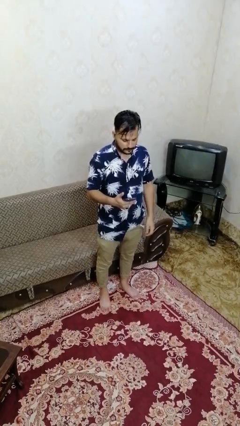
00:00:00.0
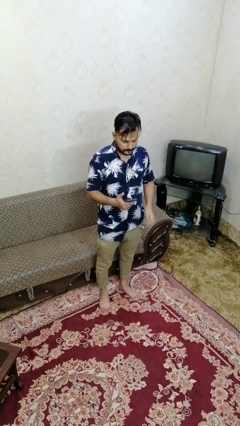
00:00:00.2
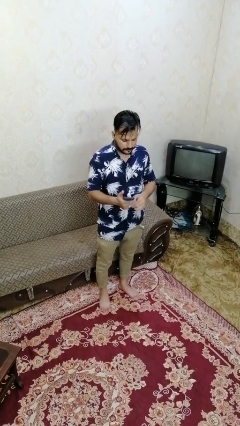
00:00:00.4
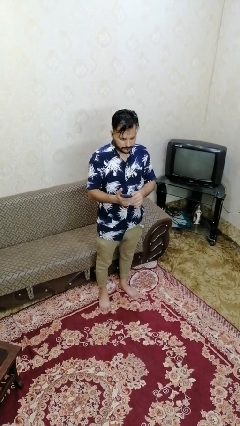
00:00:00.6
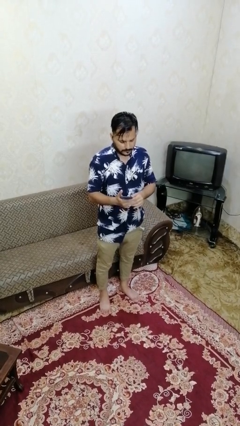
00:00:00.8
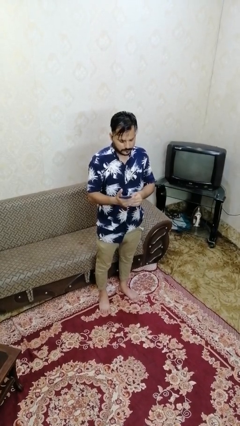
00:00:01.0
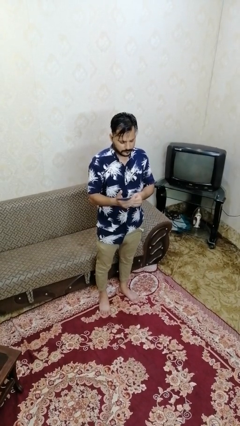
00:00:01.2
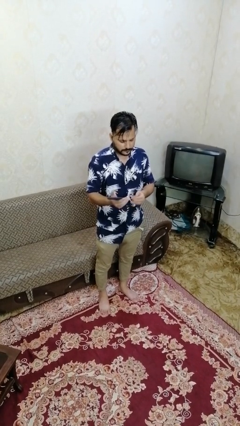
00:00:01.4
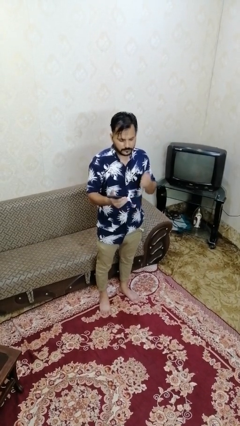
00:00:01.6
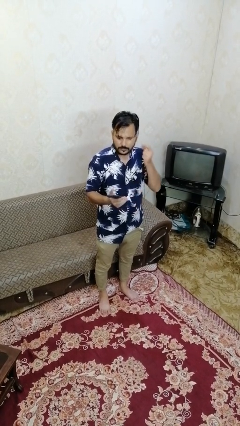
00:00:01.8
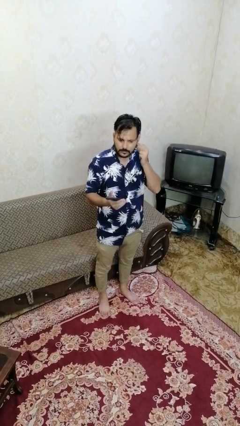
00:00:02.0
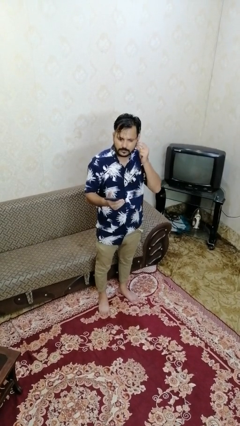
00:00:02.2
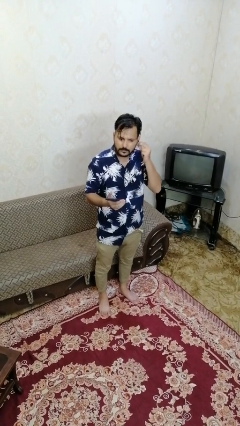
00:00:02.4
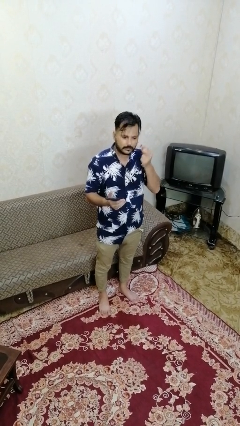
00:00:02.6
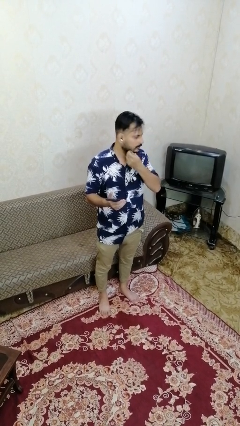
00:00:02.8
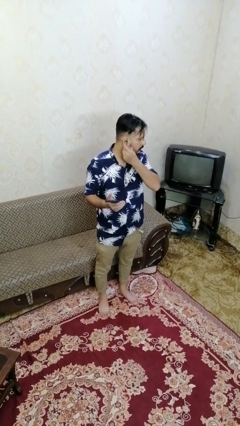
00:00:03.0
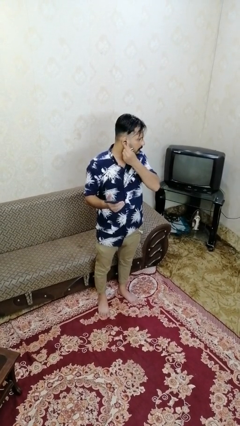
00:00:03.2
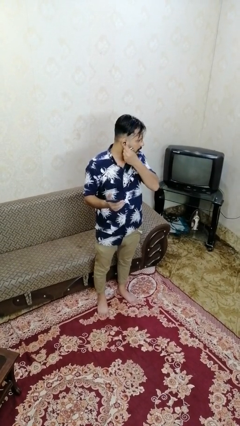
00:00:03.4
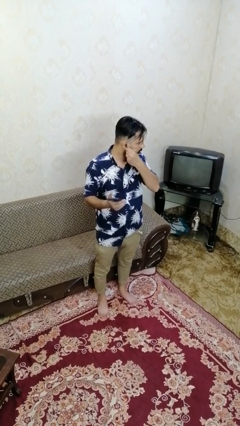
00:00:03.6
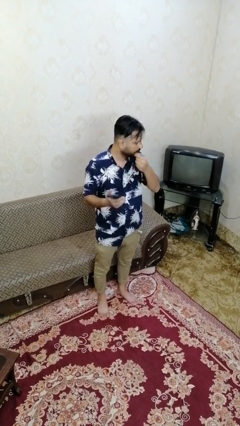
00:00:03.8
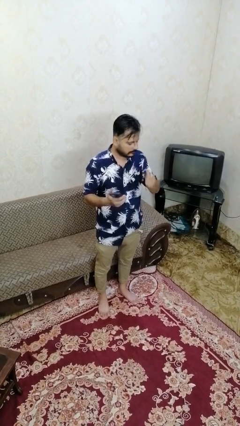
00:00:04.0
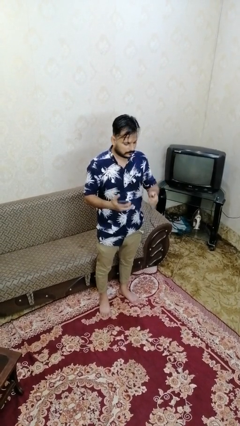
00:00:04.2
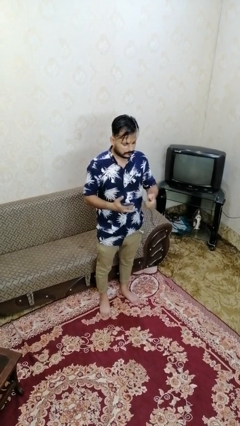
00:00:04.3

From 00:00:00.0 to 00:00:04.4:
person takes off headphones

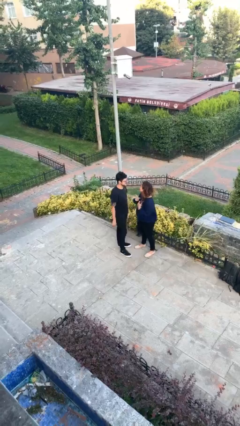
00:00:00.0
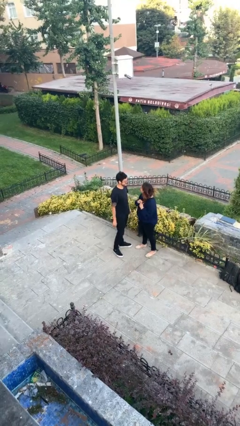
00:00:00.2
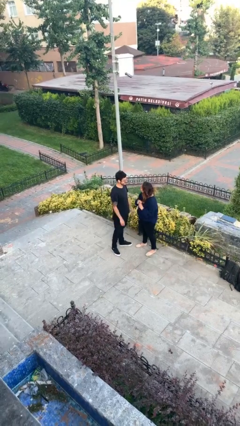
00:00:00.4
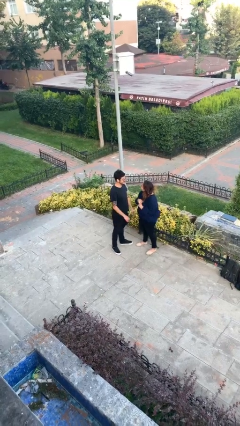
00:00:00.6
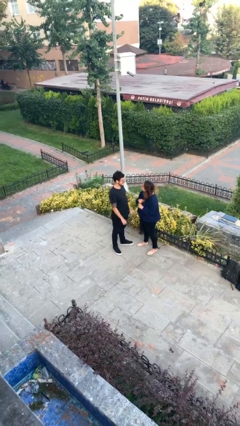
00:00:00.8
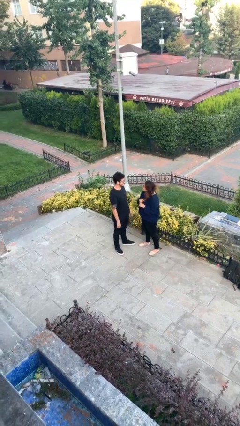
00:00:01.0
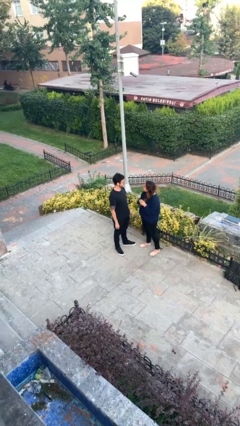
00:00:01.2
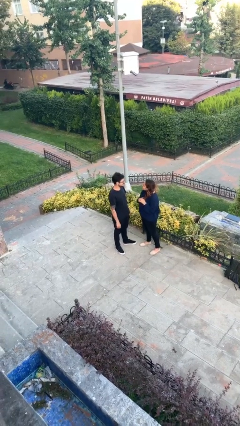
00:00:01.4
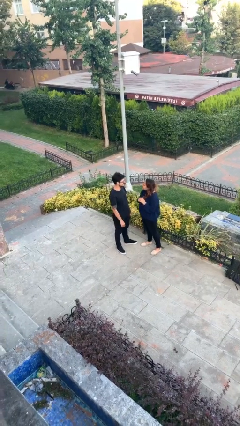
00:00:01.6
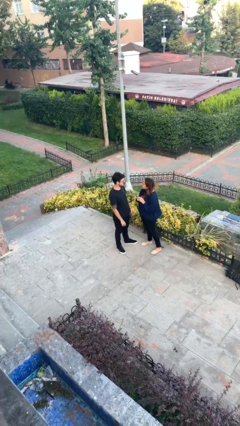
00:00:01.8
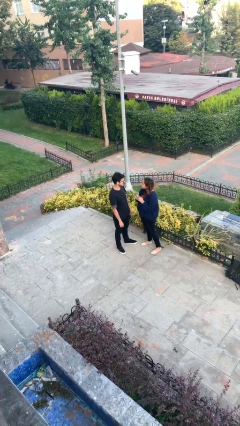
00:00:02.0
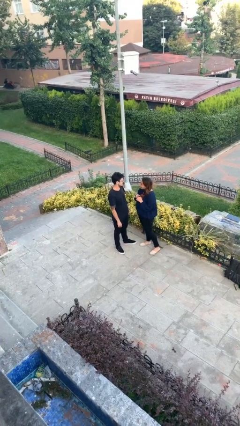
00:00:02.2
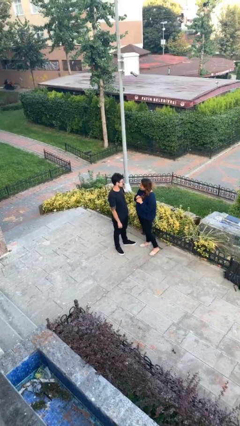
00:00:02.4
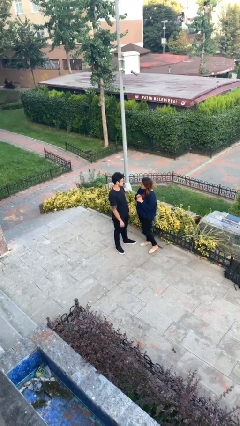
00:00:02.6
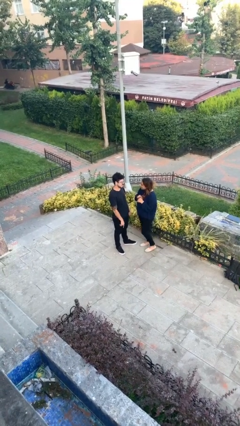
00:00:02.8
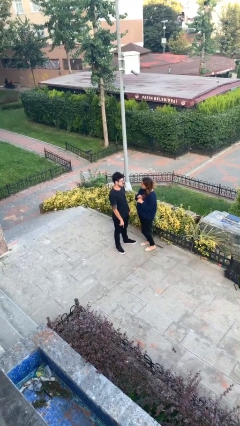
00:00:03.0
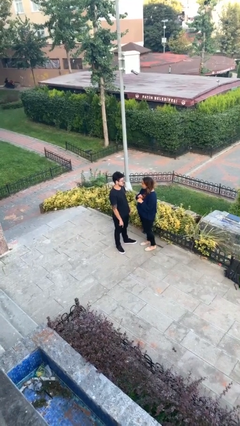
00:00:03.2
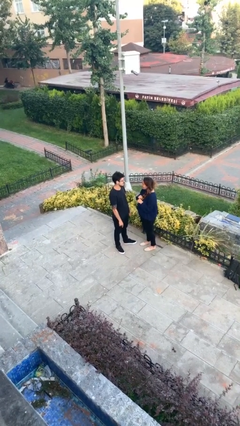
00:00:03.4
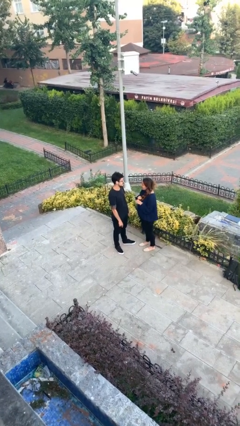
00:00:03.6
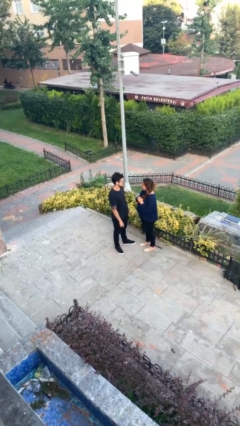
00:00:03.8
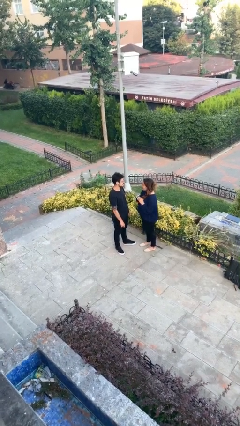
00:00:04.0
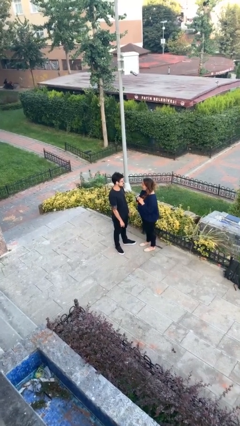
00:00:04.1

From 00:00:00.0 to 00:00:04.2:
person talks to person

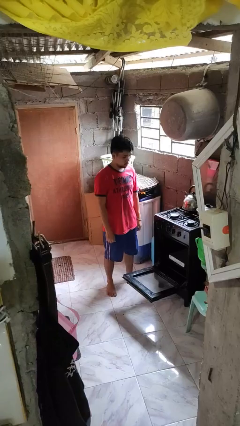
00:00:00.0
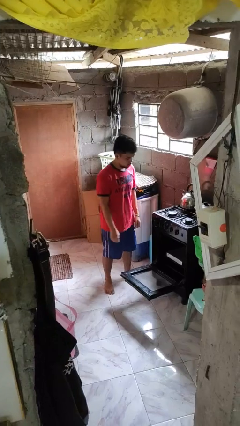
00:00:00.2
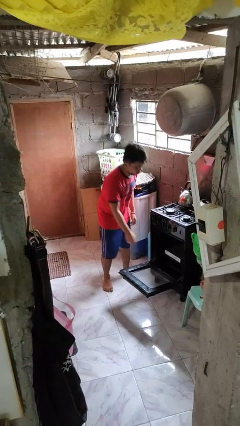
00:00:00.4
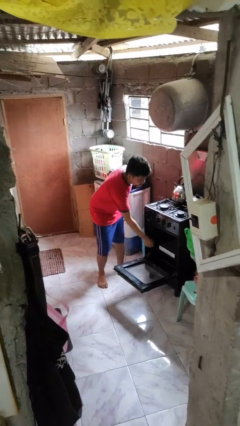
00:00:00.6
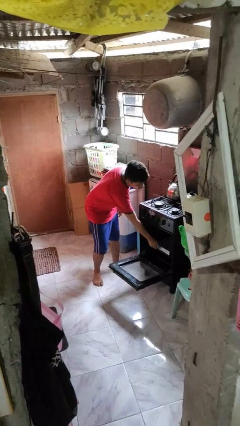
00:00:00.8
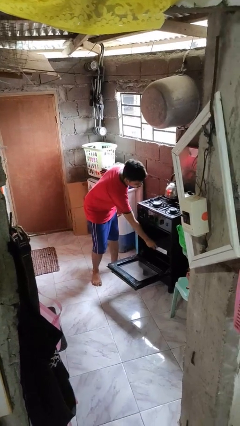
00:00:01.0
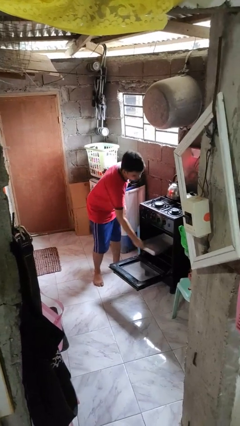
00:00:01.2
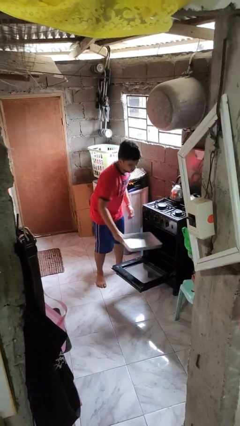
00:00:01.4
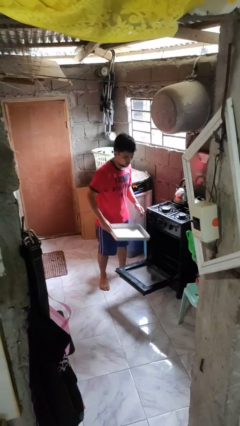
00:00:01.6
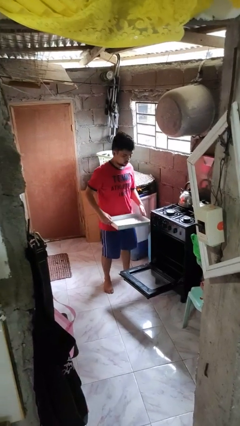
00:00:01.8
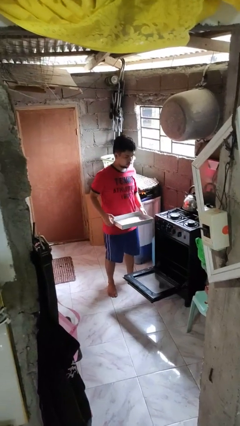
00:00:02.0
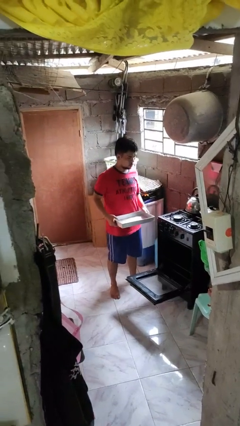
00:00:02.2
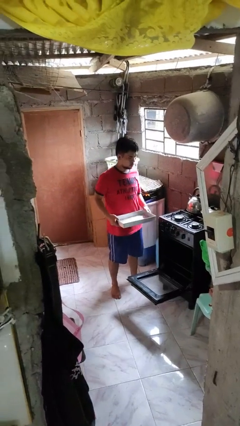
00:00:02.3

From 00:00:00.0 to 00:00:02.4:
person takes object from oven

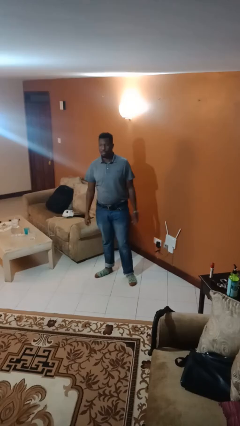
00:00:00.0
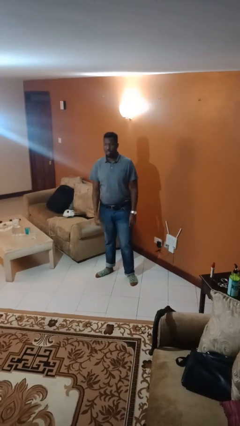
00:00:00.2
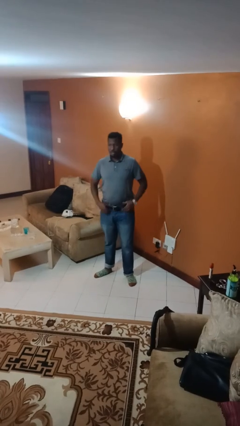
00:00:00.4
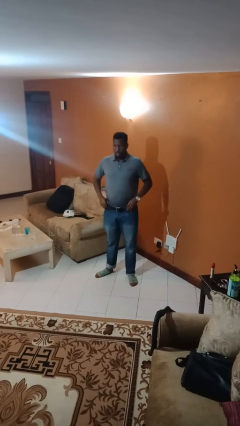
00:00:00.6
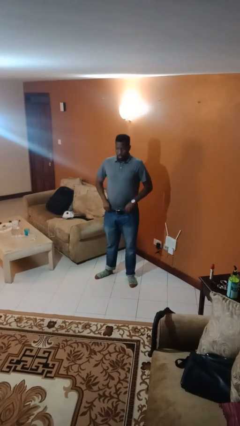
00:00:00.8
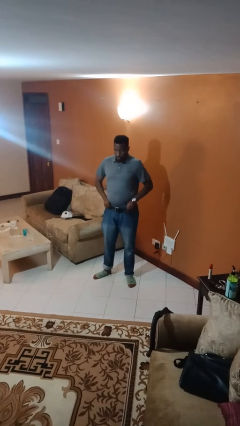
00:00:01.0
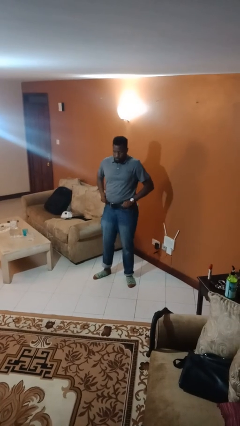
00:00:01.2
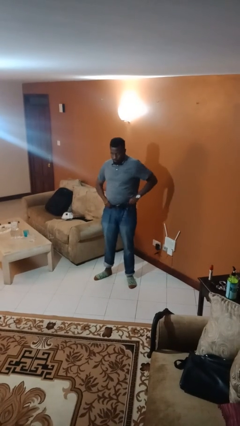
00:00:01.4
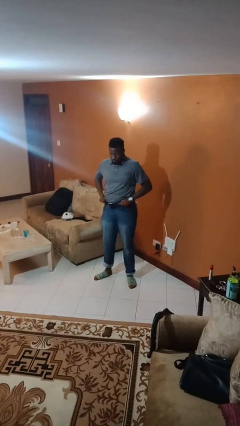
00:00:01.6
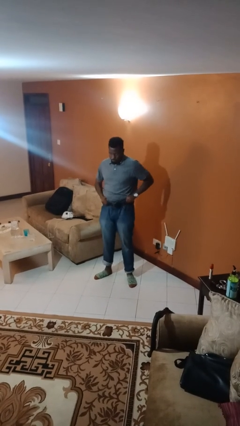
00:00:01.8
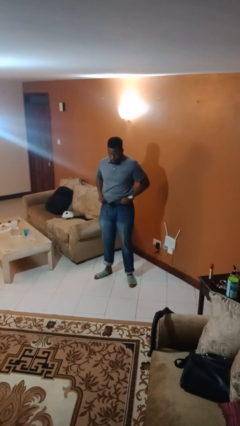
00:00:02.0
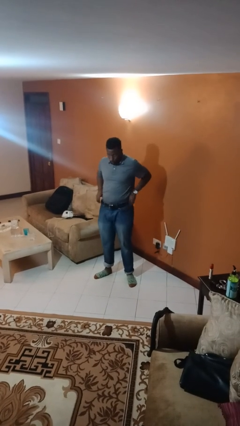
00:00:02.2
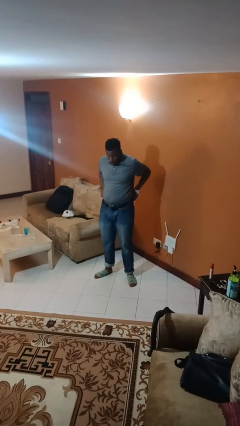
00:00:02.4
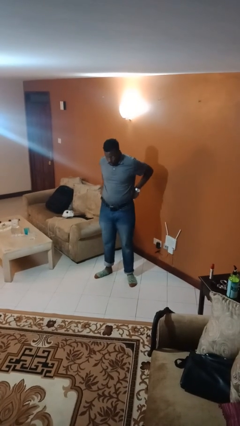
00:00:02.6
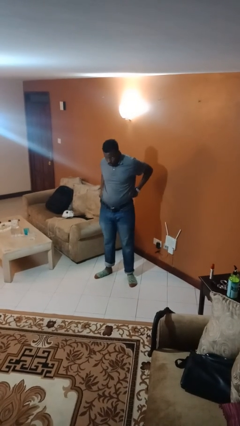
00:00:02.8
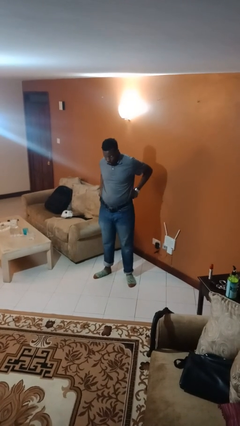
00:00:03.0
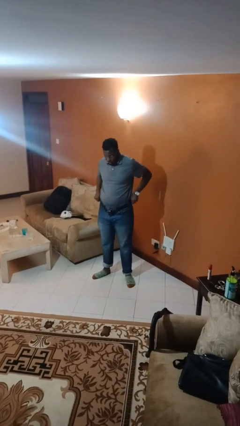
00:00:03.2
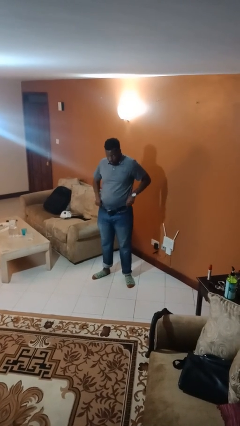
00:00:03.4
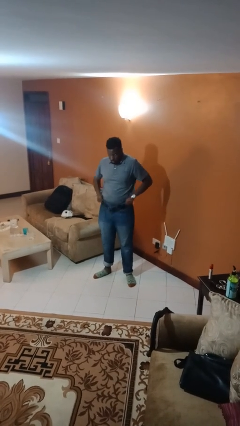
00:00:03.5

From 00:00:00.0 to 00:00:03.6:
person hikes up pants

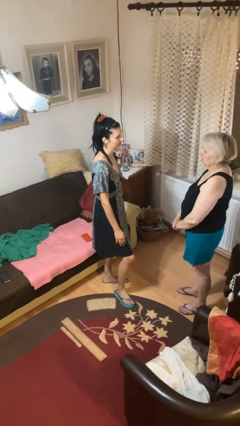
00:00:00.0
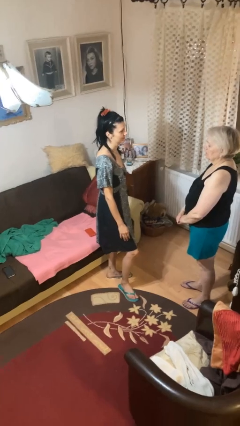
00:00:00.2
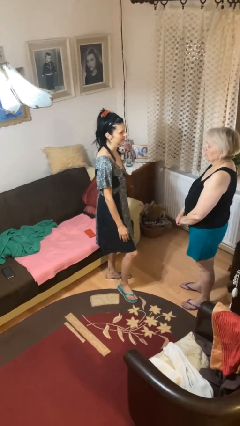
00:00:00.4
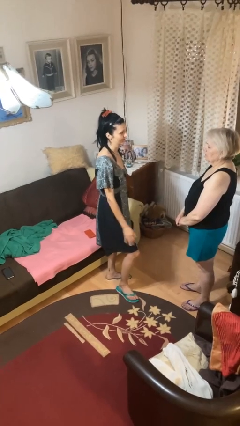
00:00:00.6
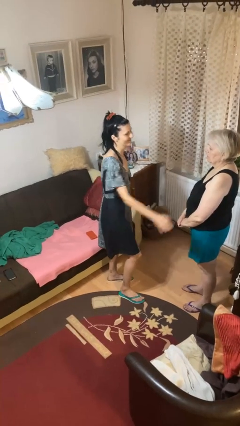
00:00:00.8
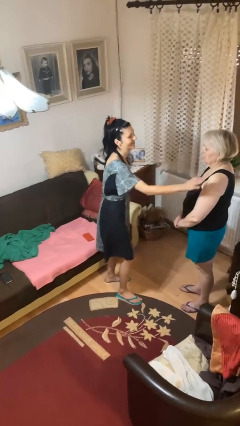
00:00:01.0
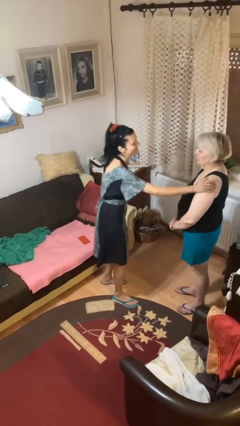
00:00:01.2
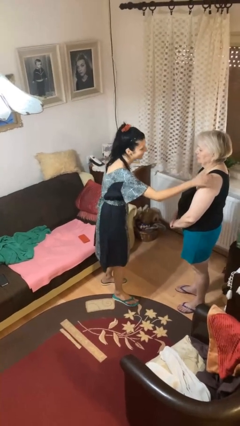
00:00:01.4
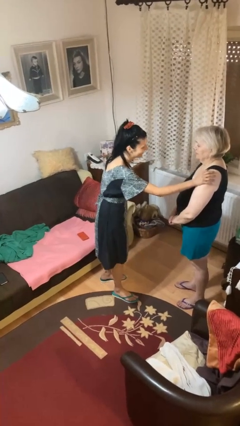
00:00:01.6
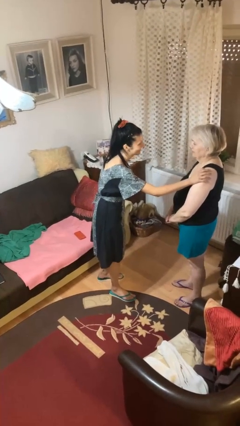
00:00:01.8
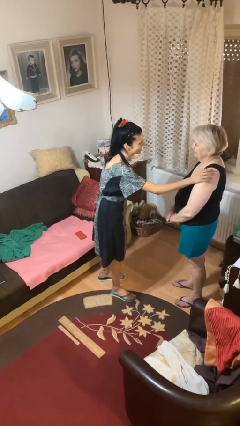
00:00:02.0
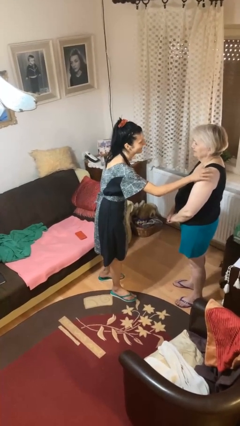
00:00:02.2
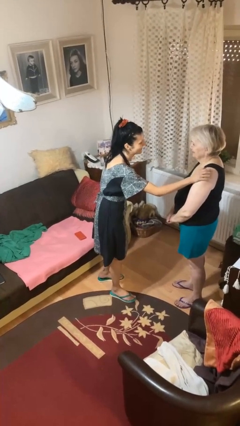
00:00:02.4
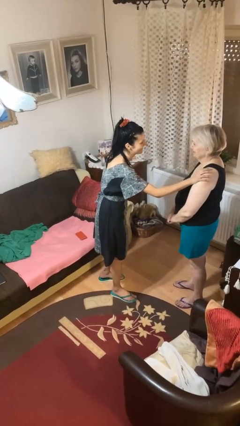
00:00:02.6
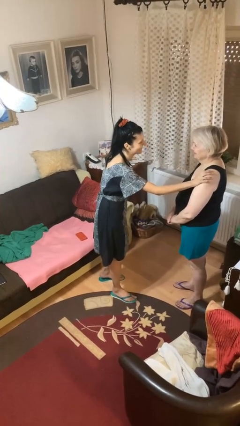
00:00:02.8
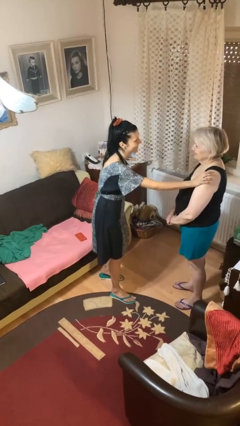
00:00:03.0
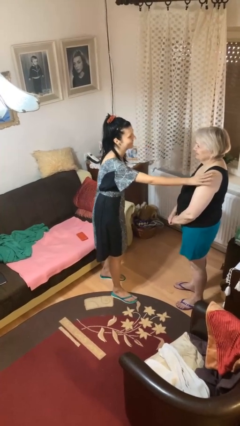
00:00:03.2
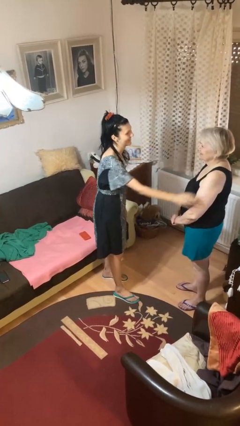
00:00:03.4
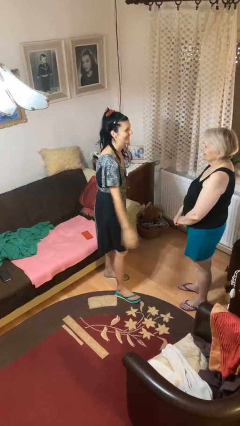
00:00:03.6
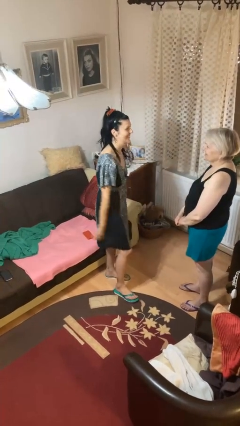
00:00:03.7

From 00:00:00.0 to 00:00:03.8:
person pounds shoulders of person
